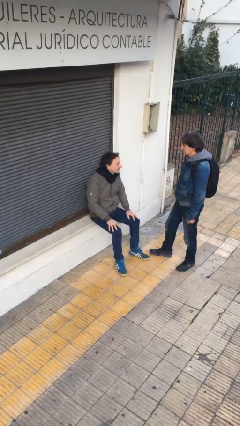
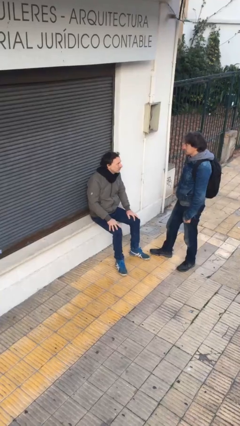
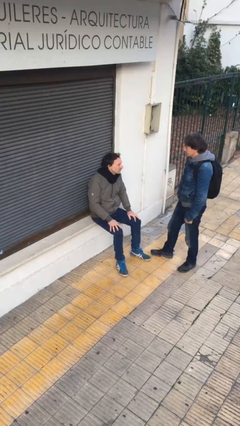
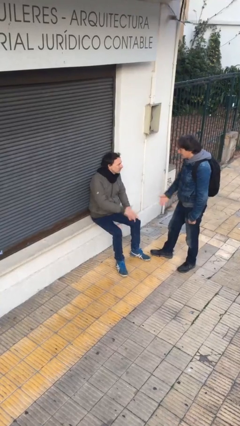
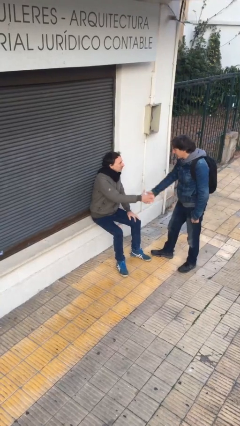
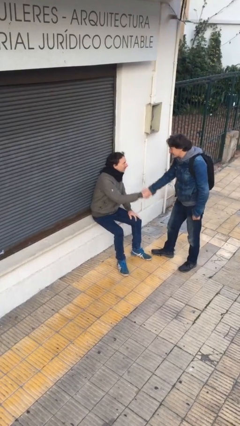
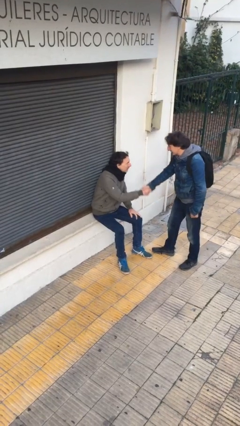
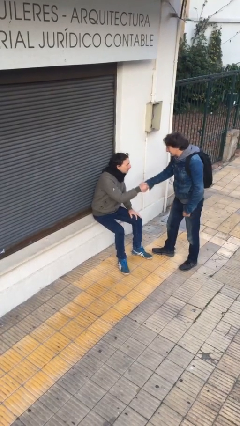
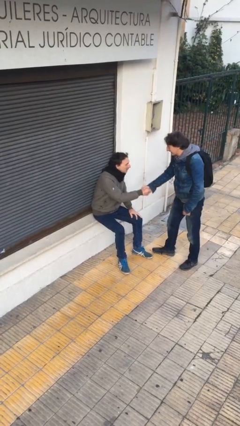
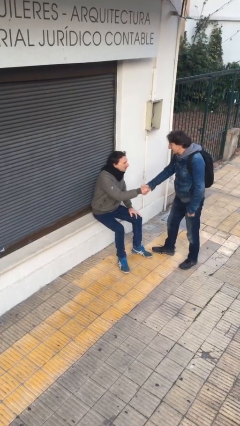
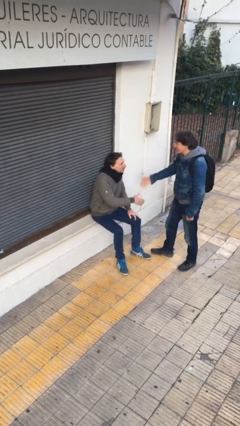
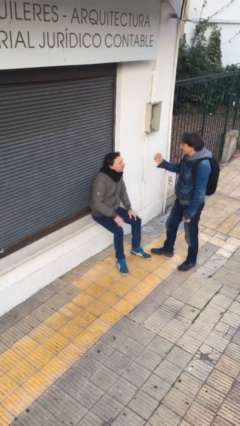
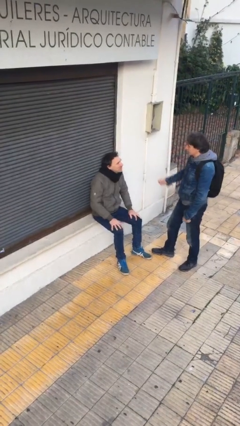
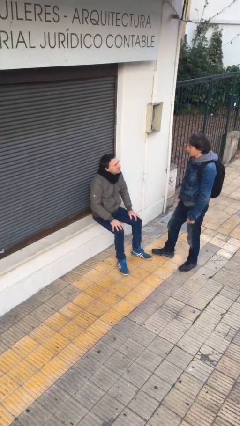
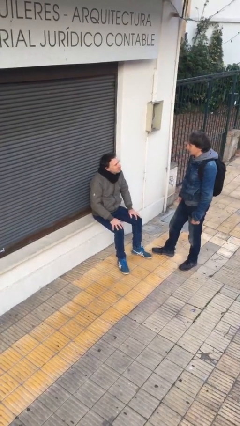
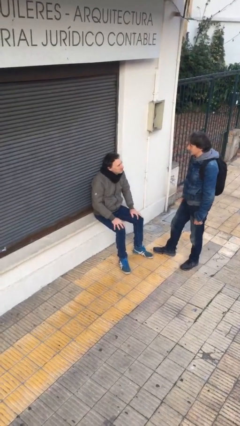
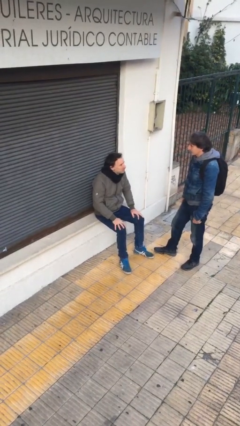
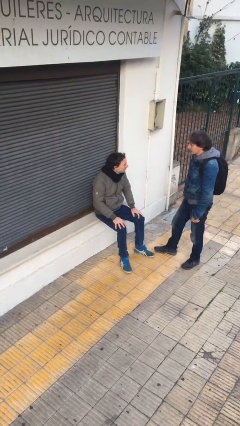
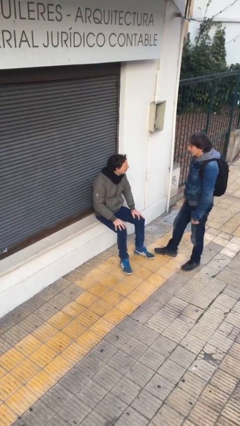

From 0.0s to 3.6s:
person shakes hand

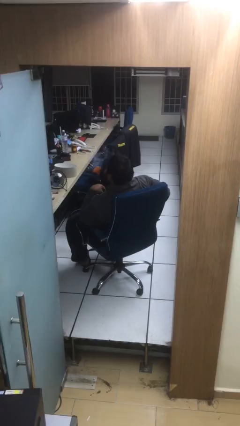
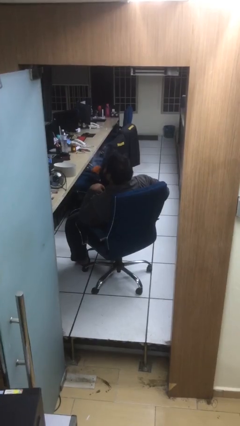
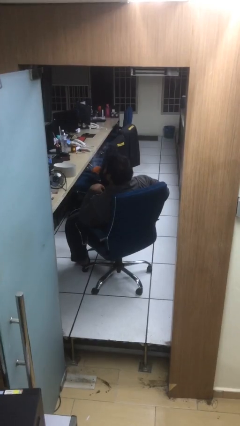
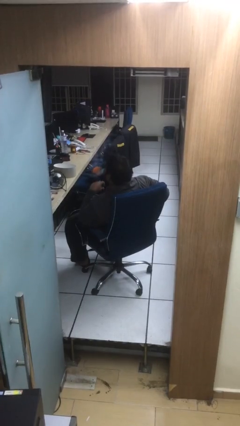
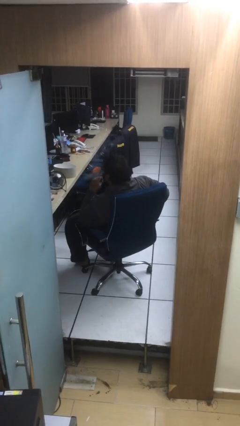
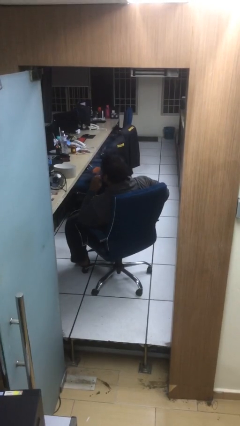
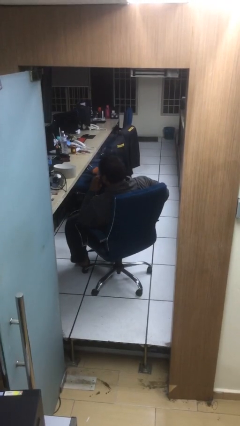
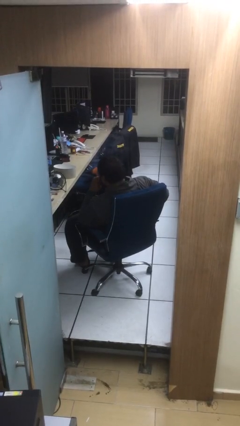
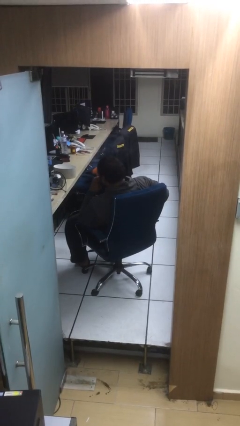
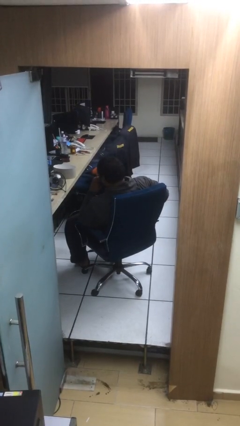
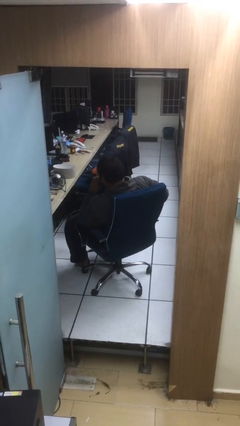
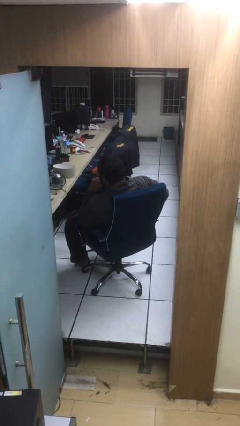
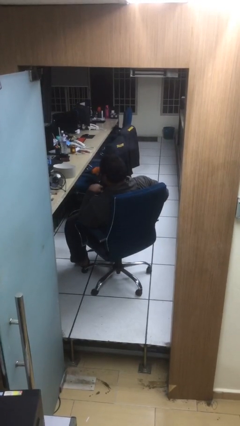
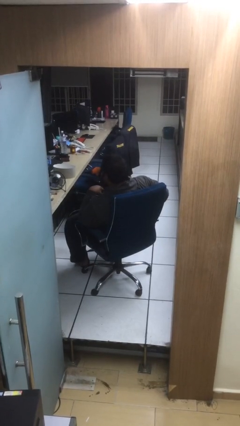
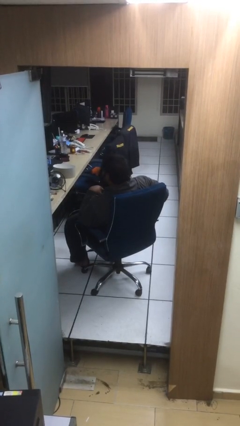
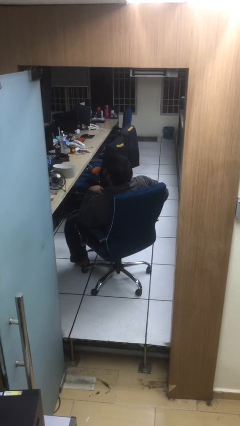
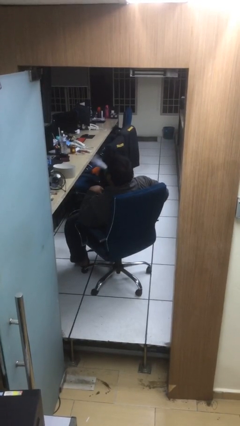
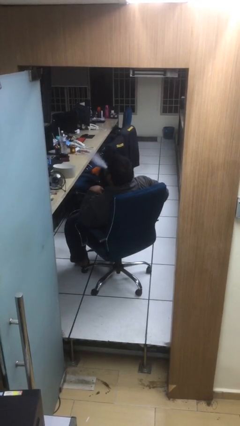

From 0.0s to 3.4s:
person vapes

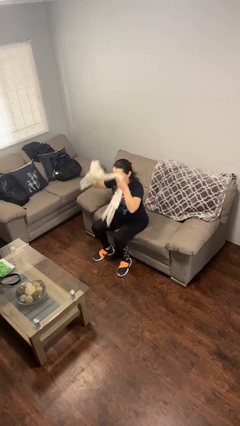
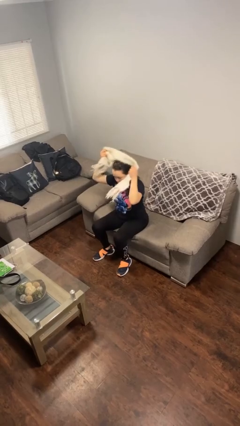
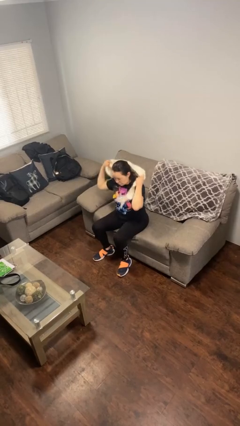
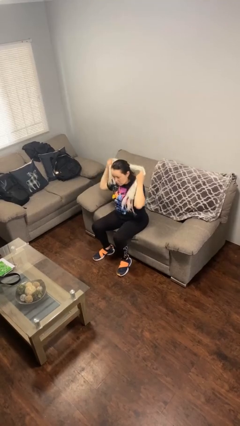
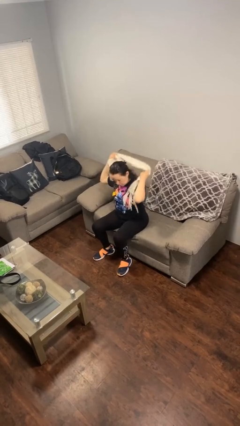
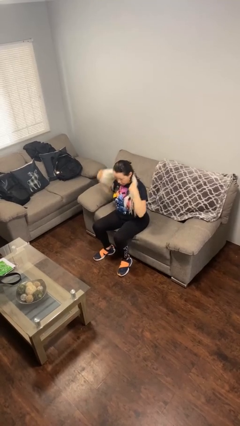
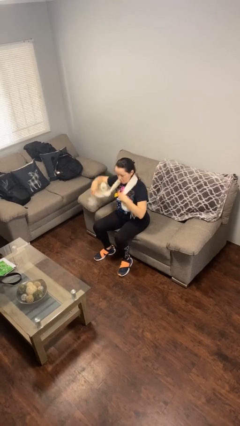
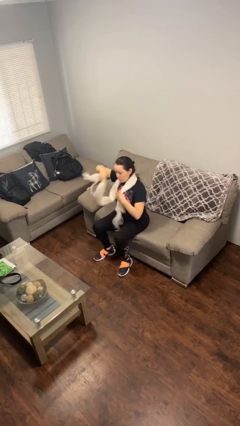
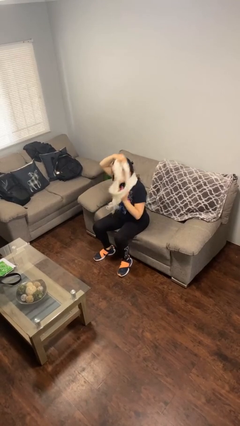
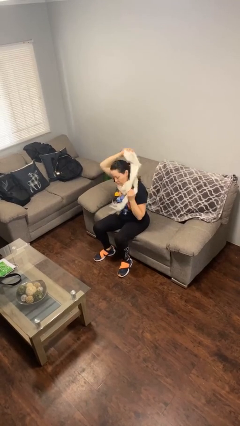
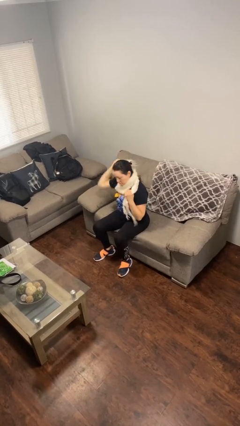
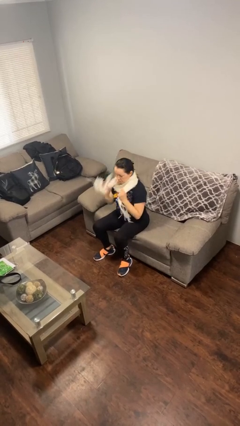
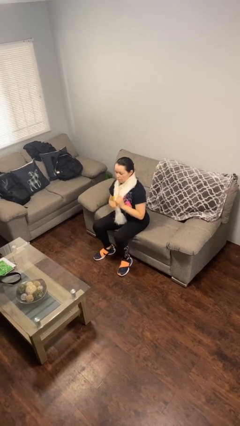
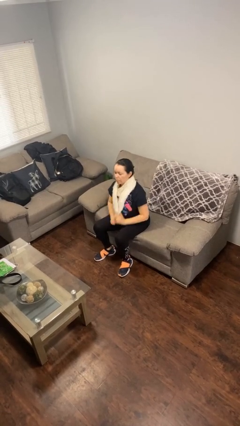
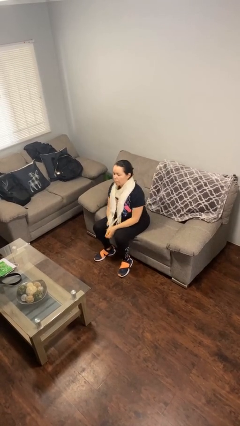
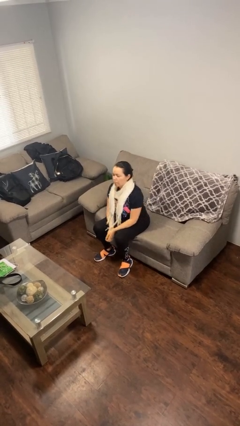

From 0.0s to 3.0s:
person puts on scarf

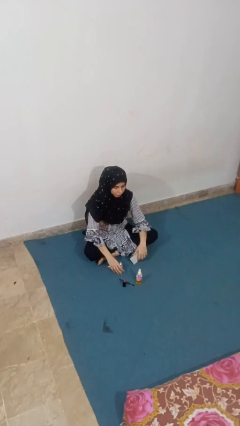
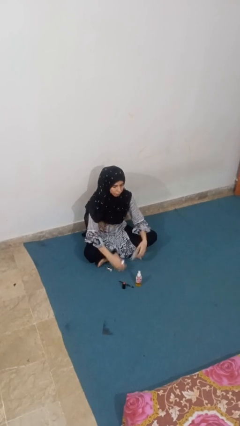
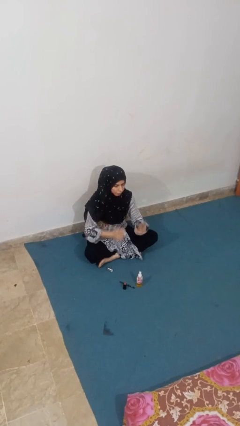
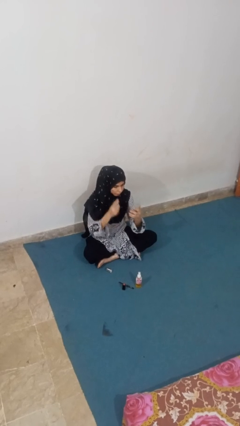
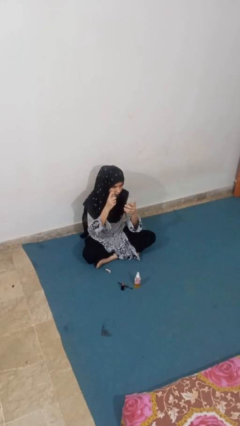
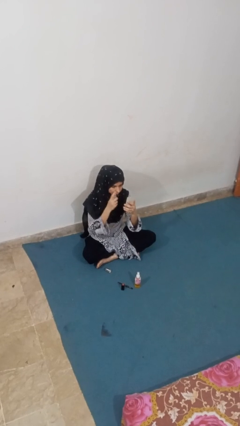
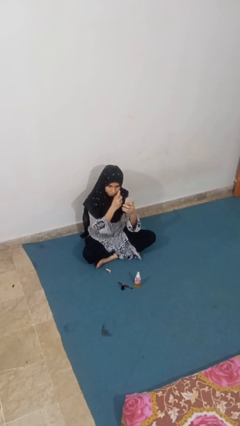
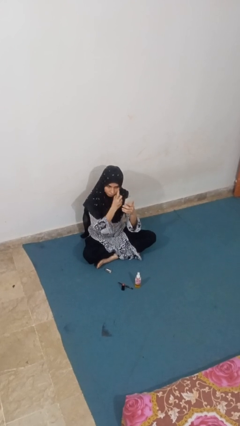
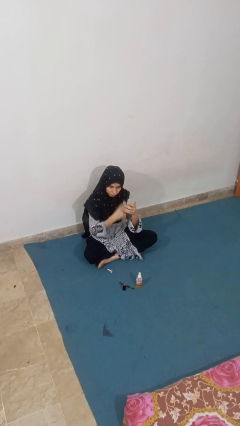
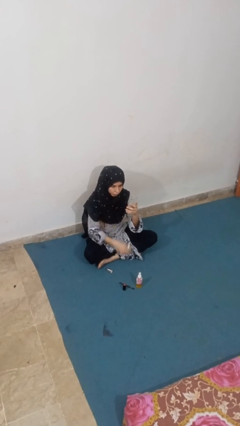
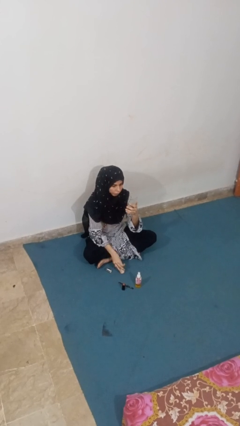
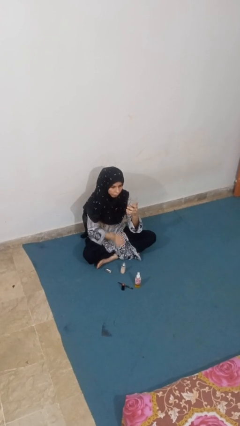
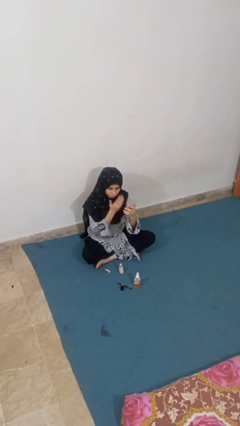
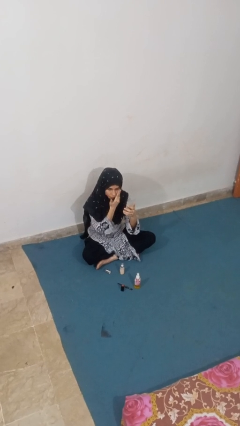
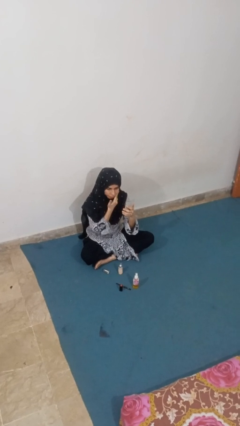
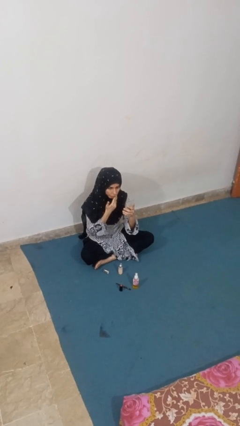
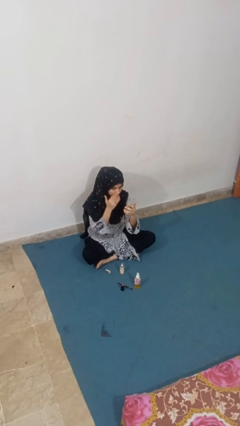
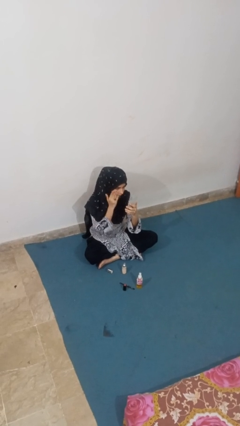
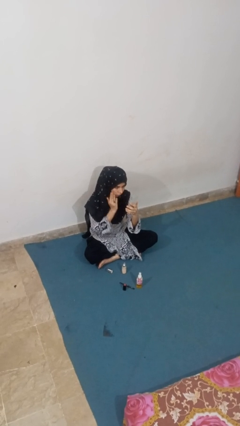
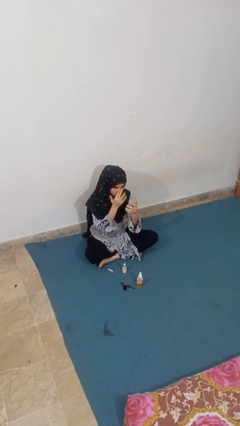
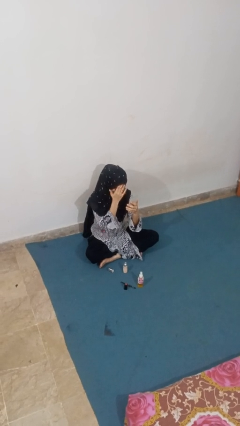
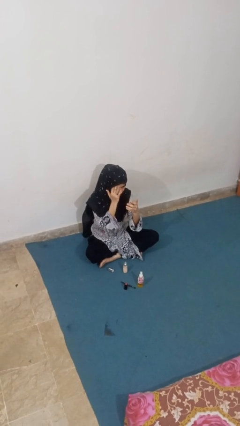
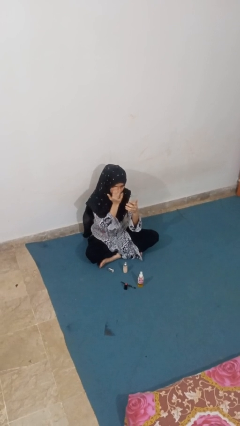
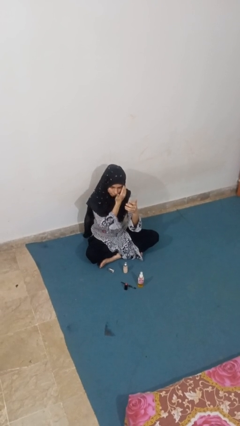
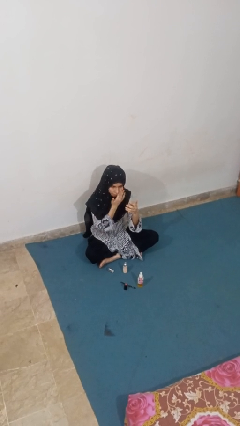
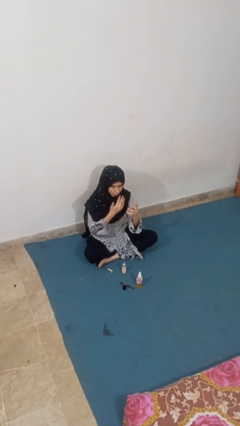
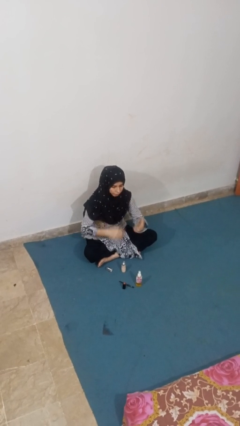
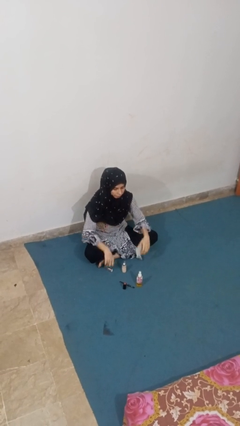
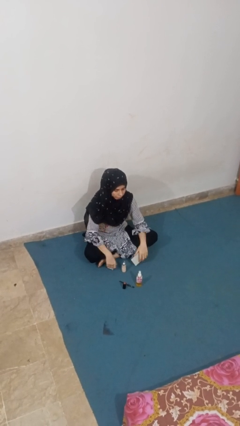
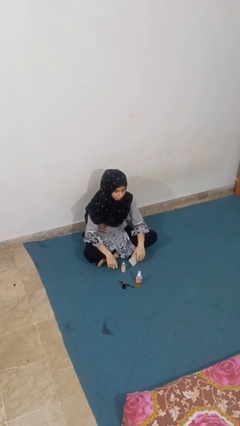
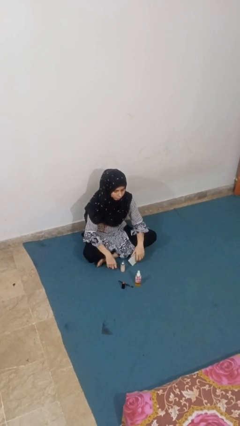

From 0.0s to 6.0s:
person applies foundation makeup

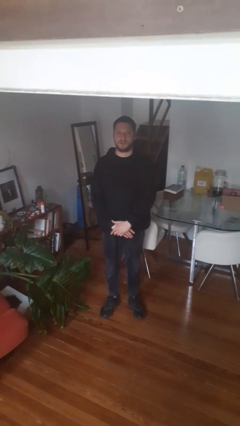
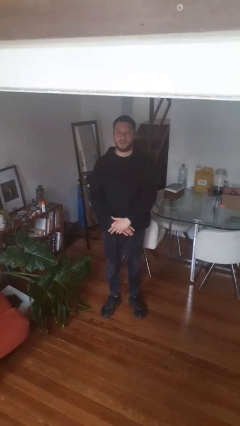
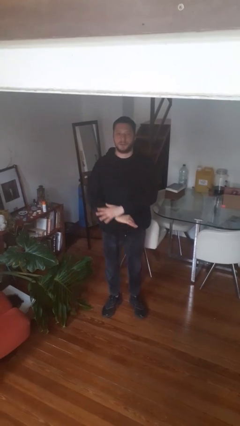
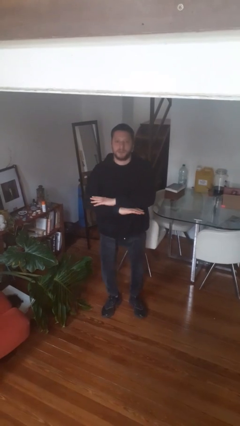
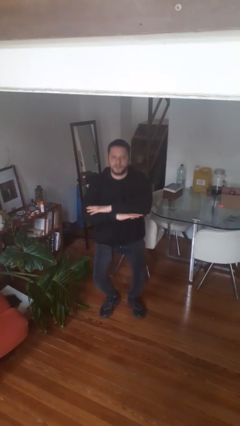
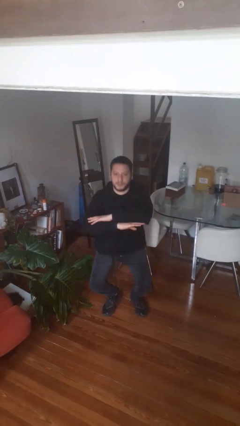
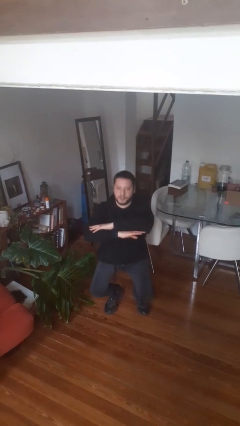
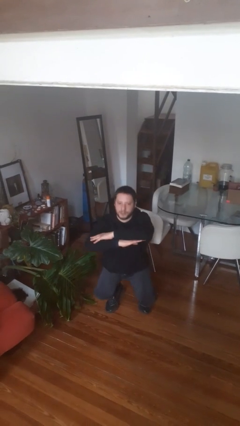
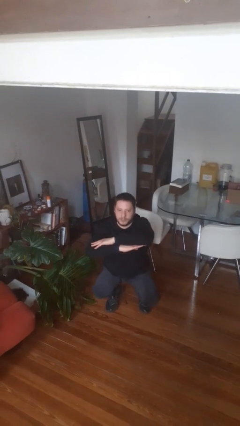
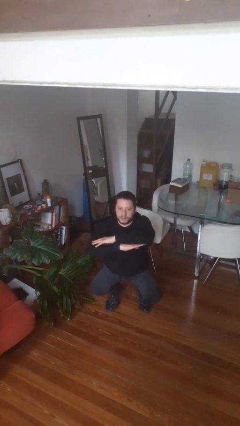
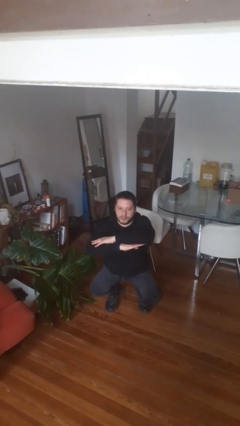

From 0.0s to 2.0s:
person squats
